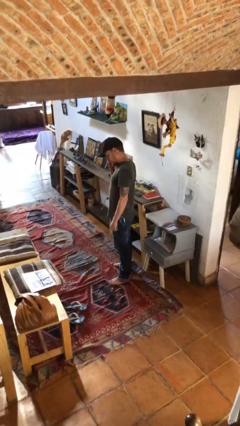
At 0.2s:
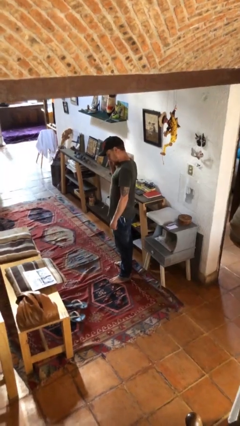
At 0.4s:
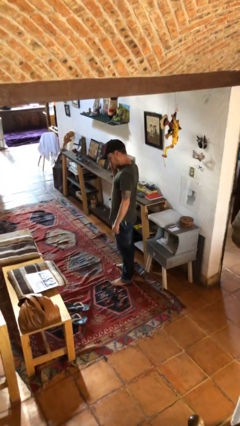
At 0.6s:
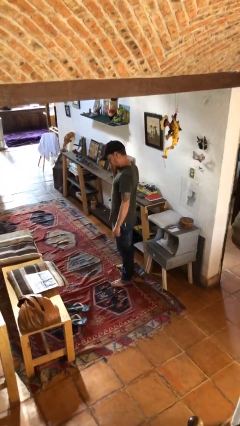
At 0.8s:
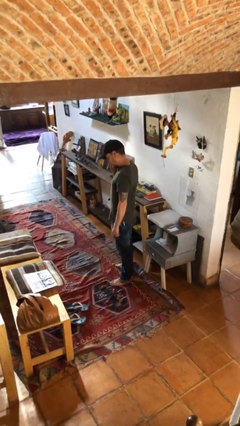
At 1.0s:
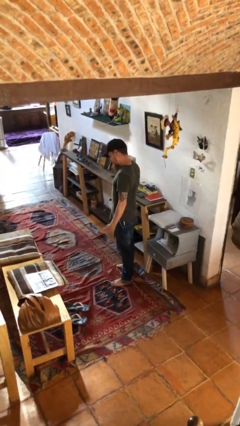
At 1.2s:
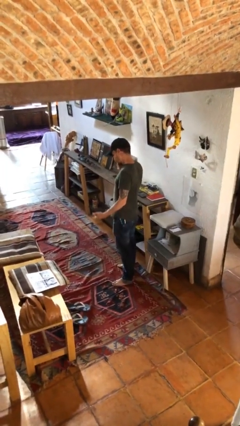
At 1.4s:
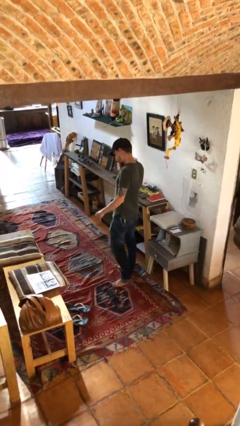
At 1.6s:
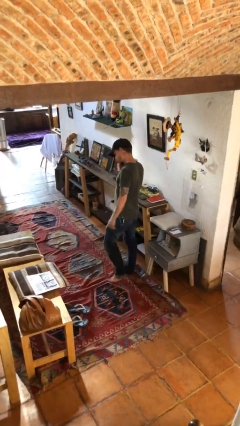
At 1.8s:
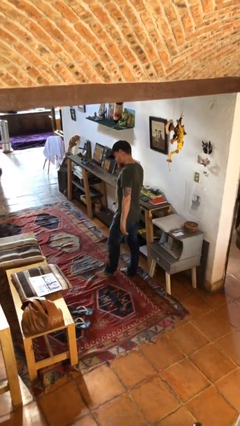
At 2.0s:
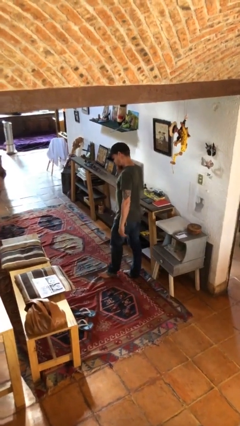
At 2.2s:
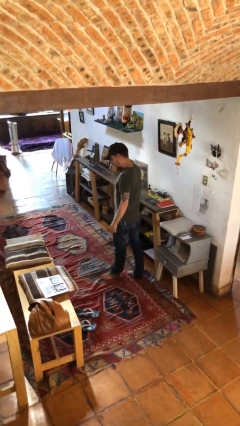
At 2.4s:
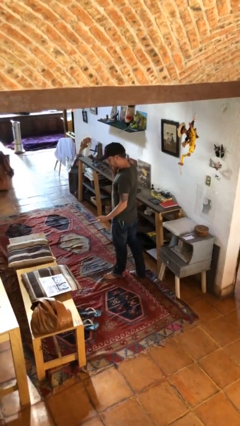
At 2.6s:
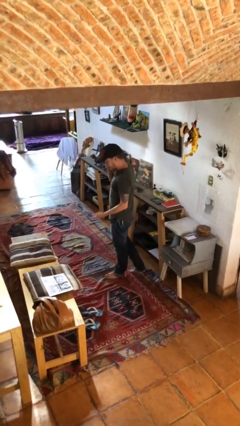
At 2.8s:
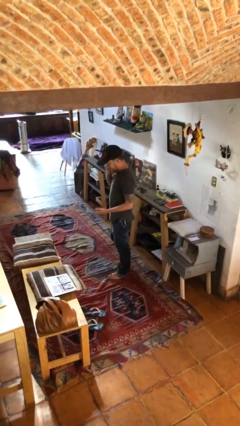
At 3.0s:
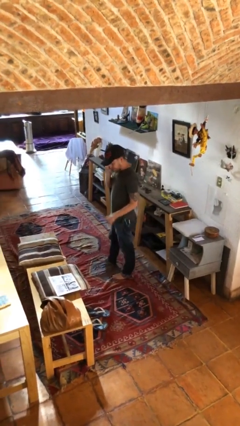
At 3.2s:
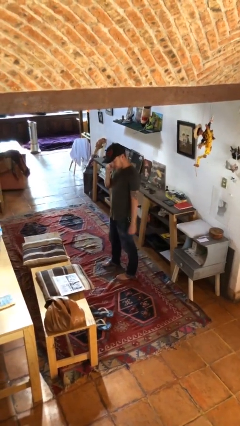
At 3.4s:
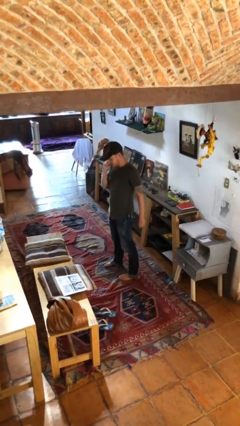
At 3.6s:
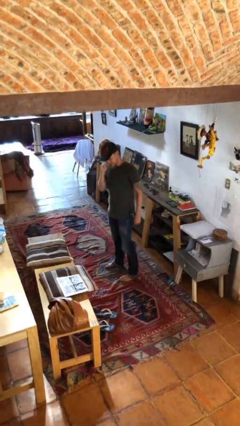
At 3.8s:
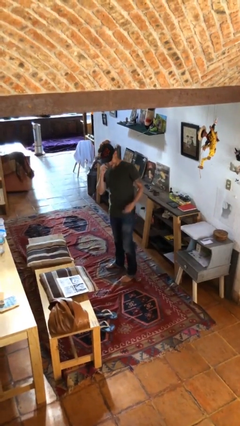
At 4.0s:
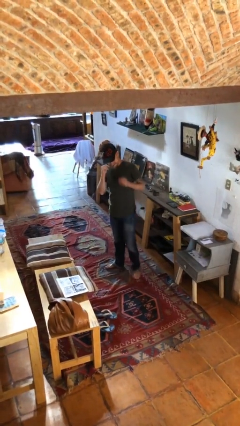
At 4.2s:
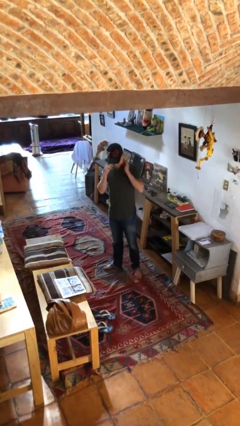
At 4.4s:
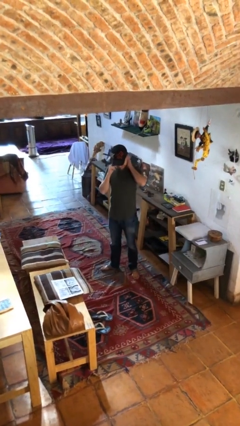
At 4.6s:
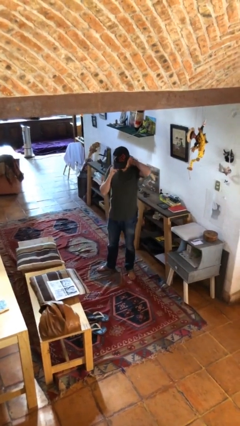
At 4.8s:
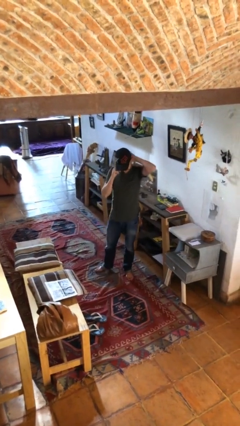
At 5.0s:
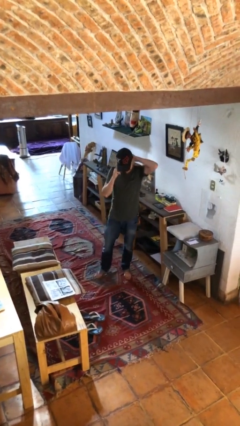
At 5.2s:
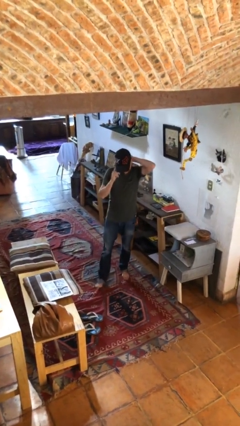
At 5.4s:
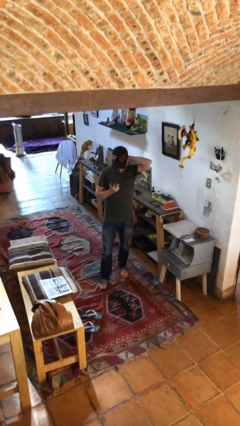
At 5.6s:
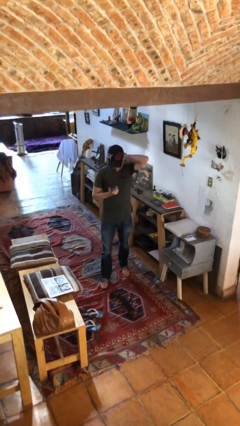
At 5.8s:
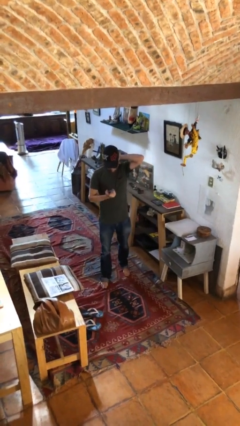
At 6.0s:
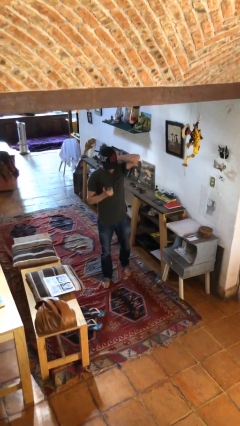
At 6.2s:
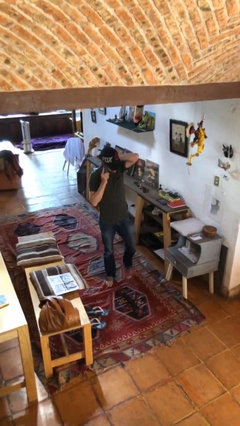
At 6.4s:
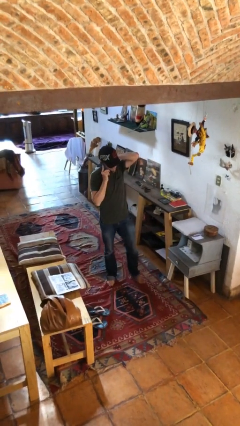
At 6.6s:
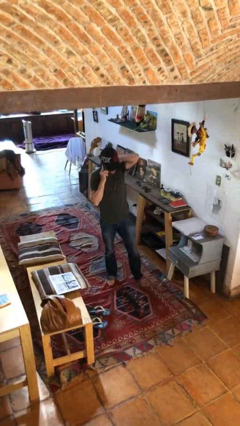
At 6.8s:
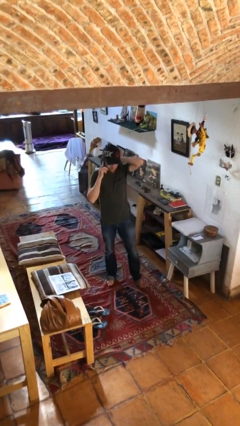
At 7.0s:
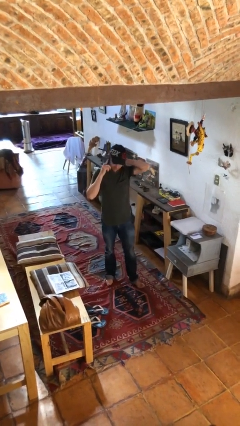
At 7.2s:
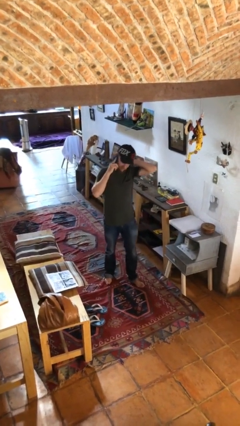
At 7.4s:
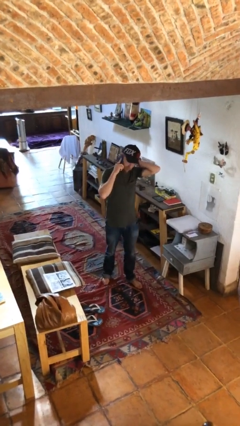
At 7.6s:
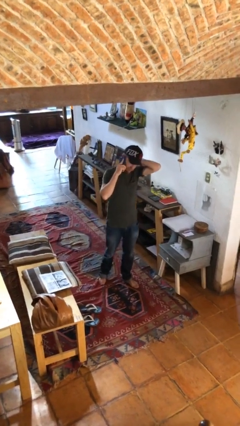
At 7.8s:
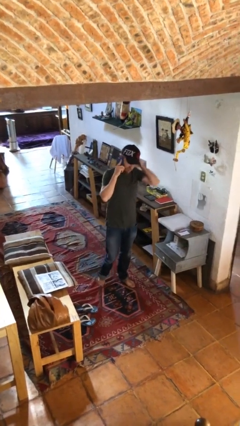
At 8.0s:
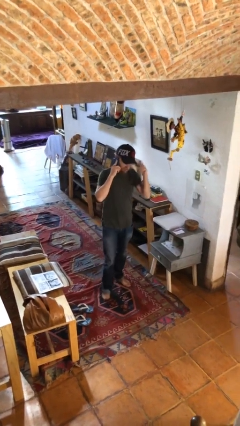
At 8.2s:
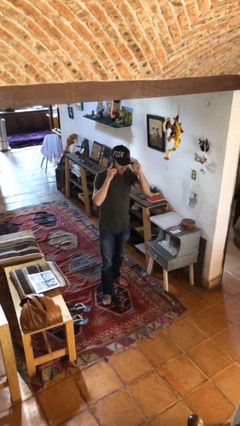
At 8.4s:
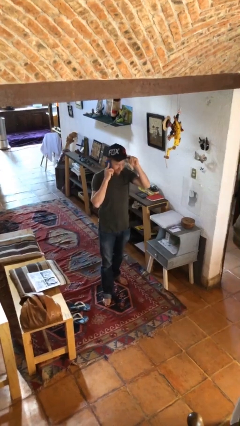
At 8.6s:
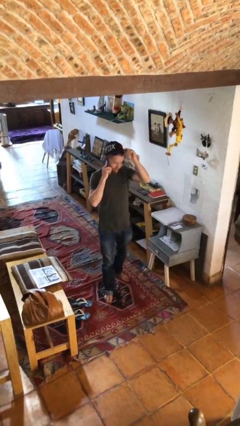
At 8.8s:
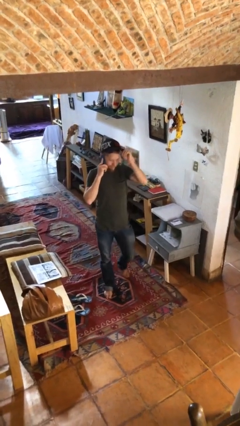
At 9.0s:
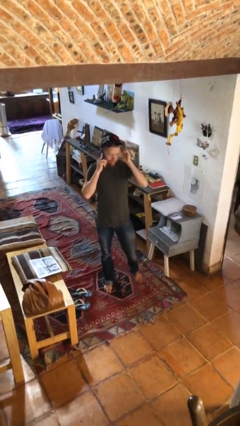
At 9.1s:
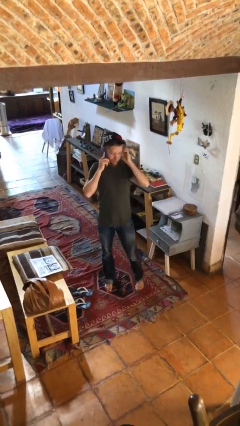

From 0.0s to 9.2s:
person talks on phone

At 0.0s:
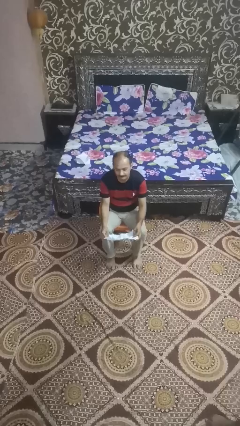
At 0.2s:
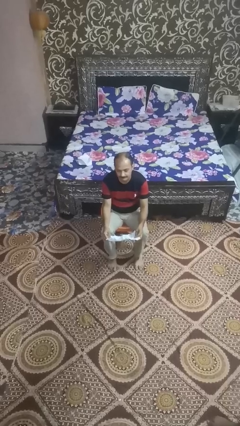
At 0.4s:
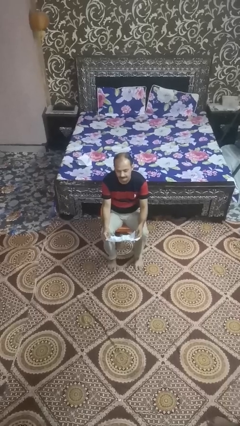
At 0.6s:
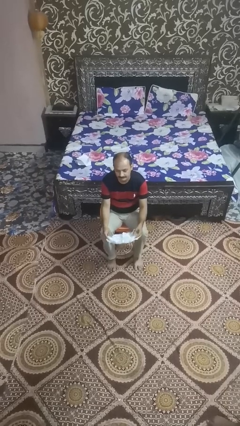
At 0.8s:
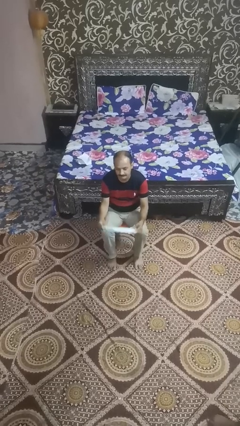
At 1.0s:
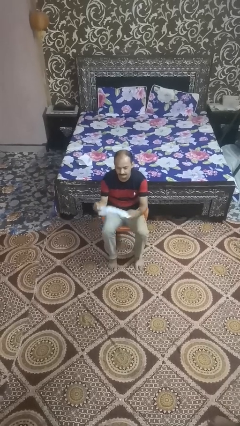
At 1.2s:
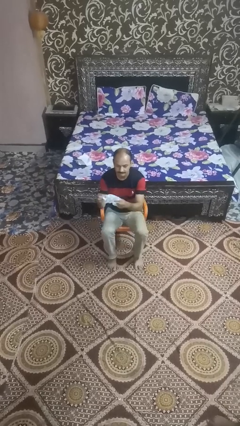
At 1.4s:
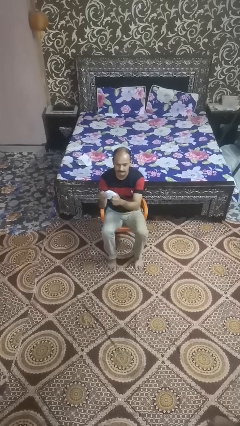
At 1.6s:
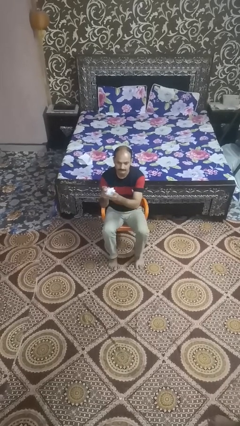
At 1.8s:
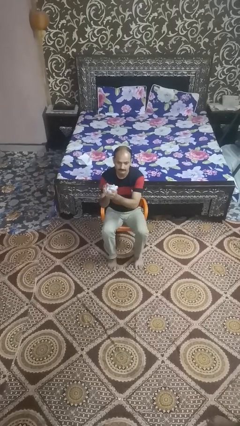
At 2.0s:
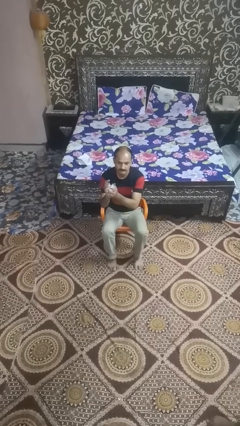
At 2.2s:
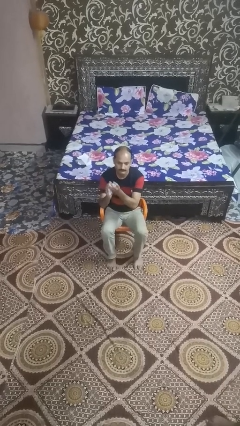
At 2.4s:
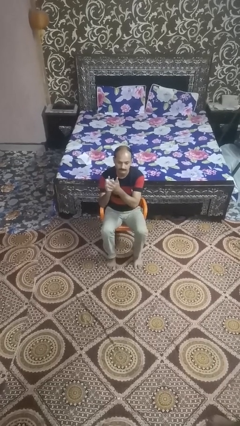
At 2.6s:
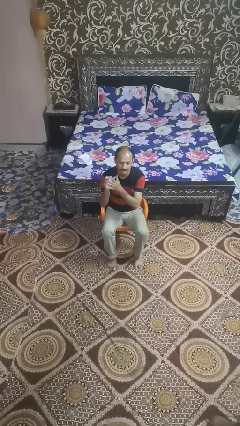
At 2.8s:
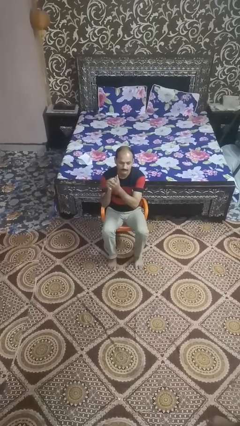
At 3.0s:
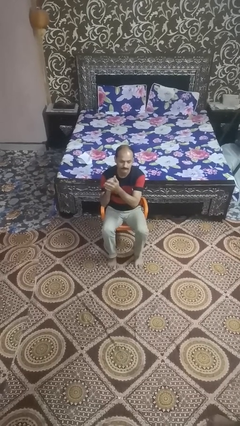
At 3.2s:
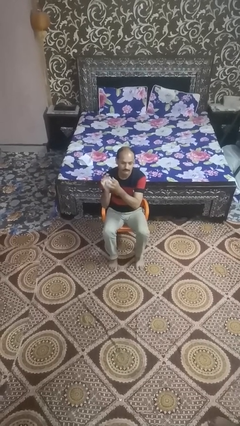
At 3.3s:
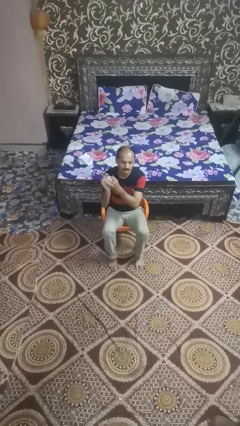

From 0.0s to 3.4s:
person crumples paper

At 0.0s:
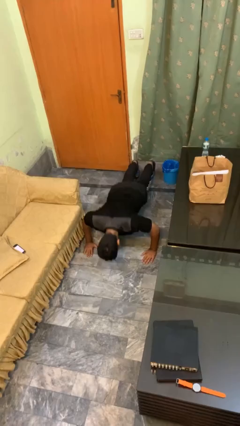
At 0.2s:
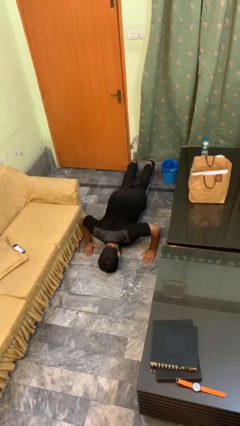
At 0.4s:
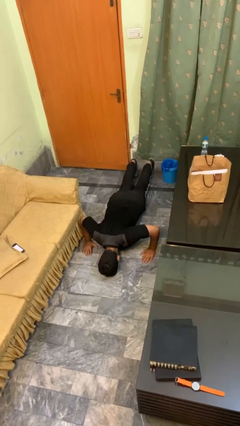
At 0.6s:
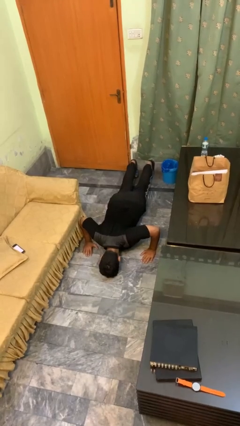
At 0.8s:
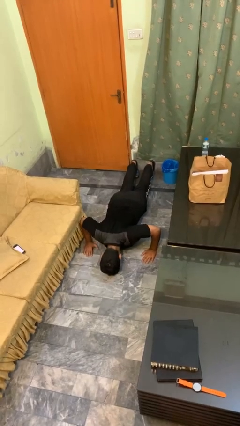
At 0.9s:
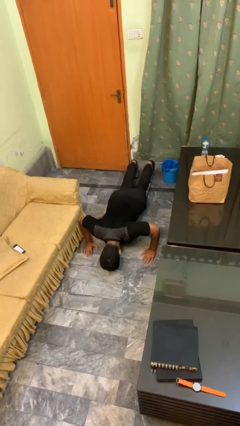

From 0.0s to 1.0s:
person exercises with pushup

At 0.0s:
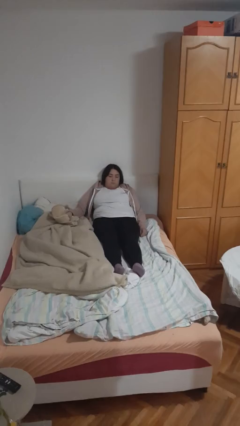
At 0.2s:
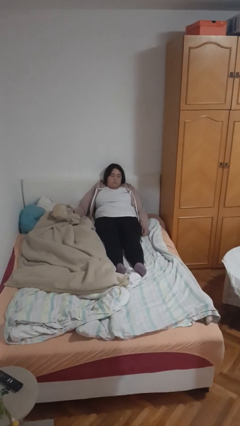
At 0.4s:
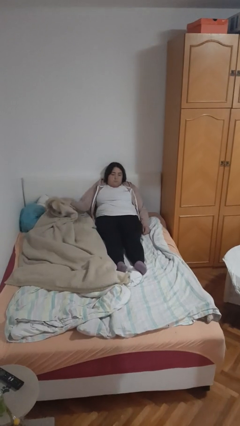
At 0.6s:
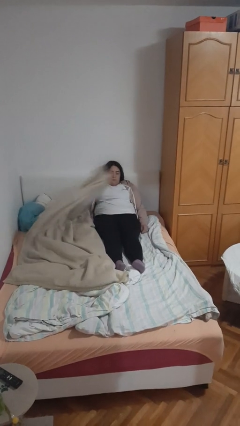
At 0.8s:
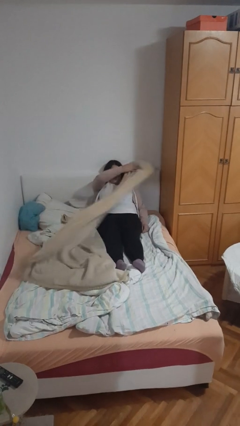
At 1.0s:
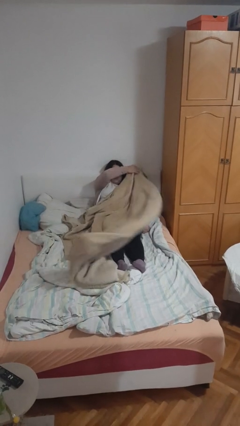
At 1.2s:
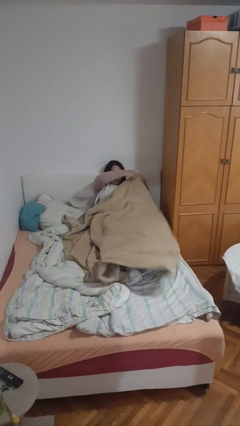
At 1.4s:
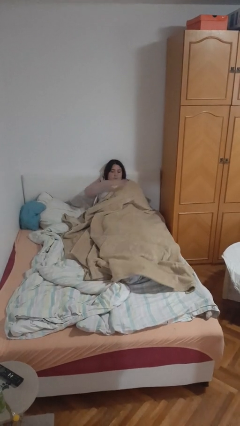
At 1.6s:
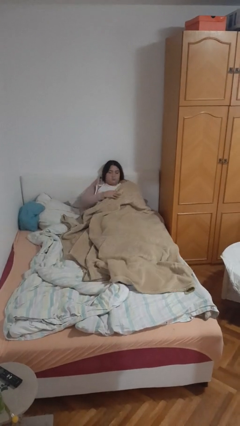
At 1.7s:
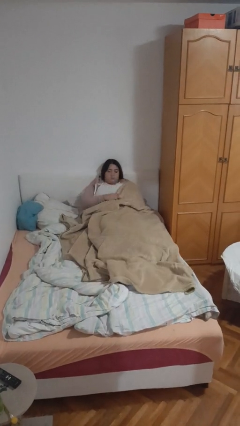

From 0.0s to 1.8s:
person covers with blanket

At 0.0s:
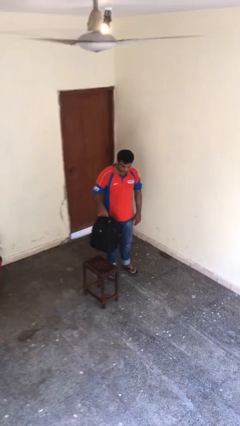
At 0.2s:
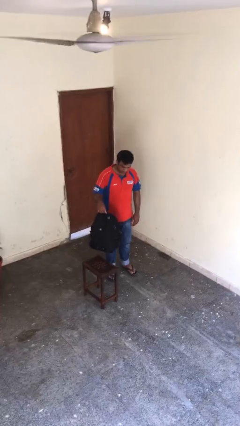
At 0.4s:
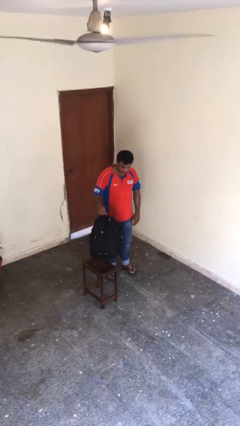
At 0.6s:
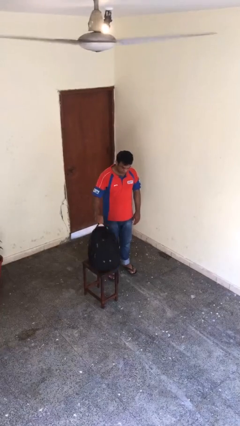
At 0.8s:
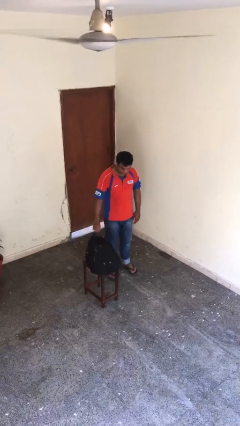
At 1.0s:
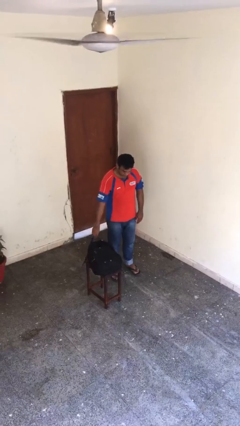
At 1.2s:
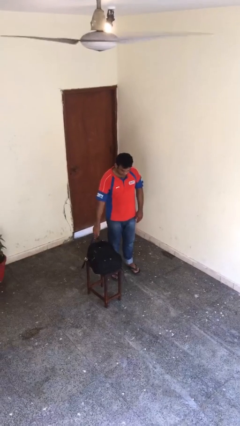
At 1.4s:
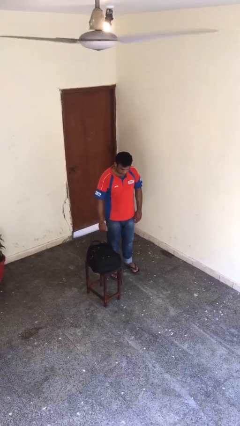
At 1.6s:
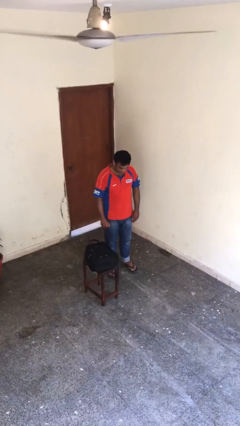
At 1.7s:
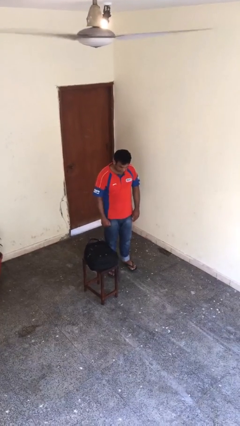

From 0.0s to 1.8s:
person puts down object on table

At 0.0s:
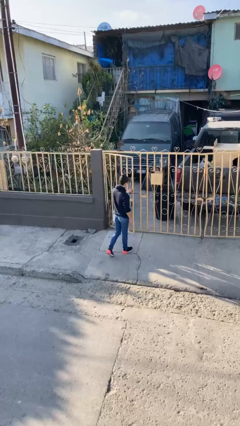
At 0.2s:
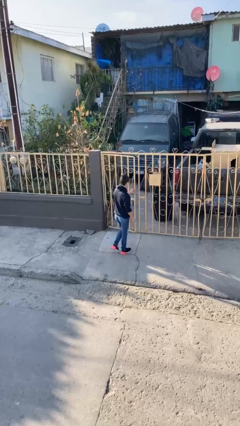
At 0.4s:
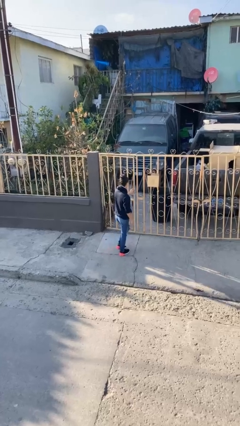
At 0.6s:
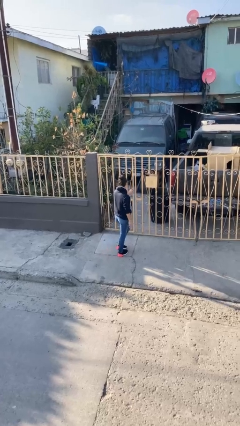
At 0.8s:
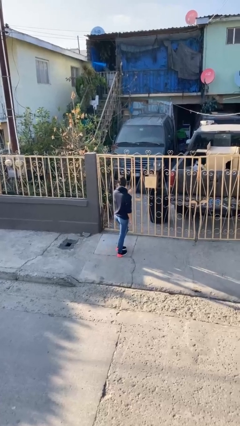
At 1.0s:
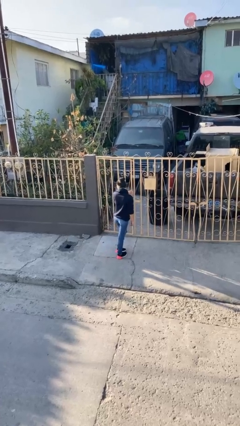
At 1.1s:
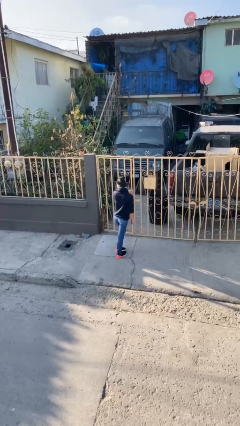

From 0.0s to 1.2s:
person closes facility door
